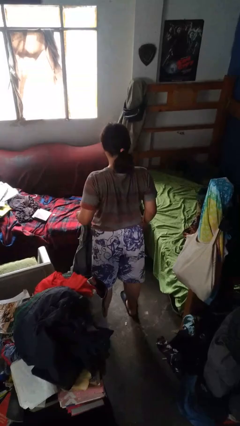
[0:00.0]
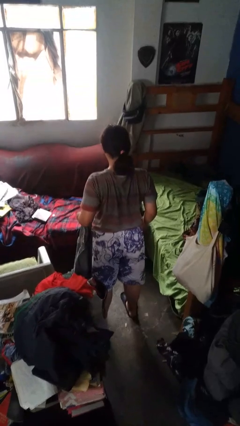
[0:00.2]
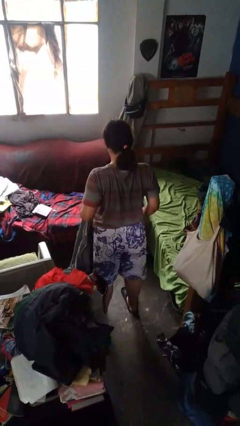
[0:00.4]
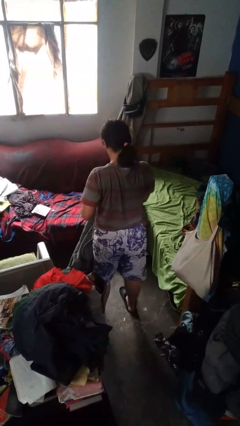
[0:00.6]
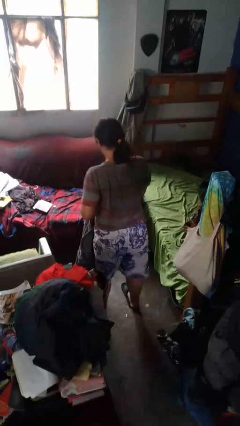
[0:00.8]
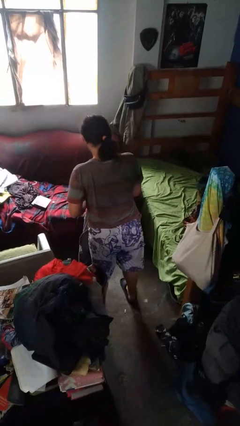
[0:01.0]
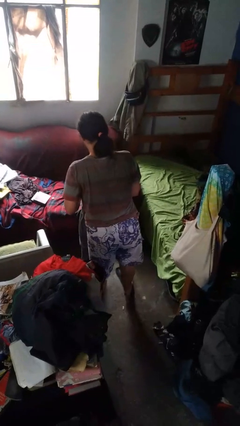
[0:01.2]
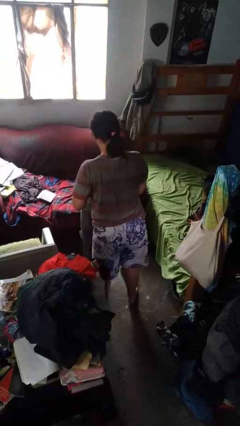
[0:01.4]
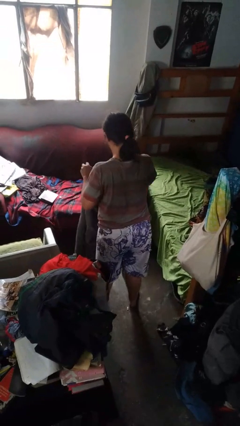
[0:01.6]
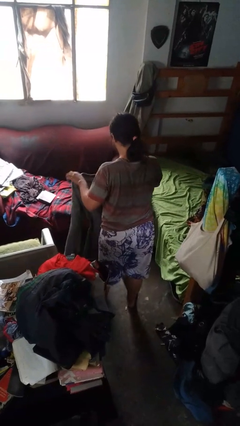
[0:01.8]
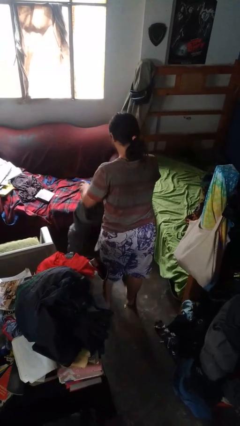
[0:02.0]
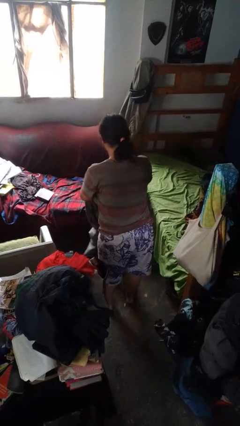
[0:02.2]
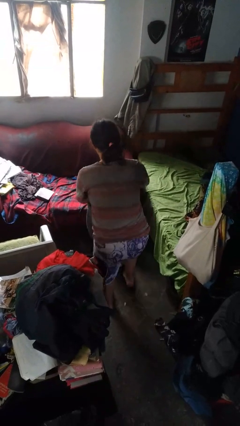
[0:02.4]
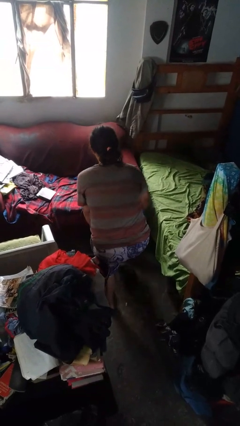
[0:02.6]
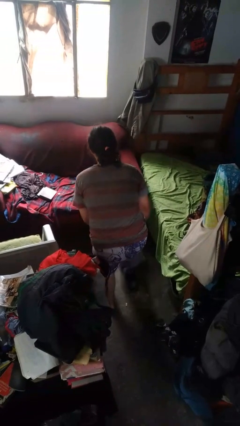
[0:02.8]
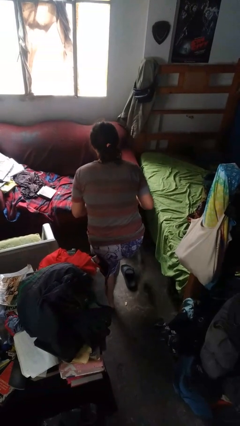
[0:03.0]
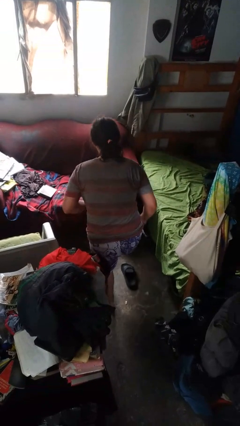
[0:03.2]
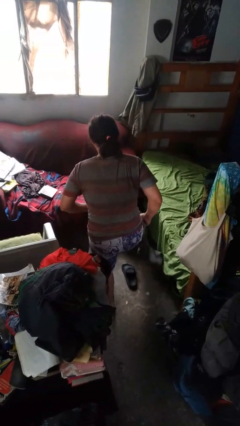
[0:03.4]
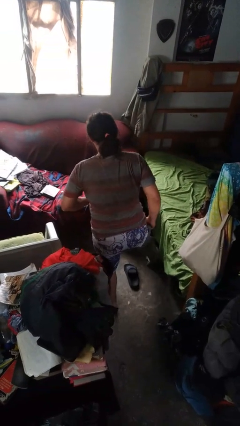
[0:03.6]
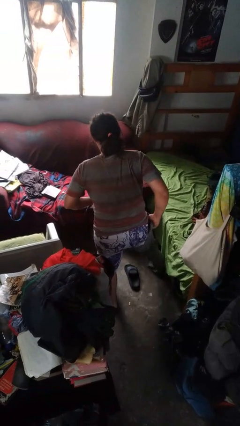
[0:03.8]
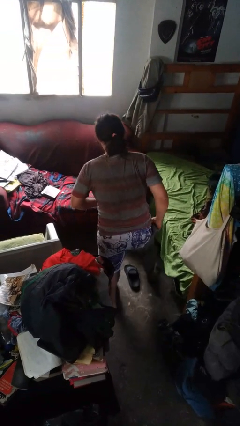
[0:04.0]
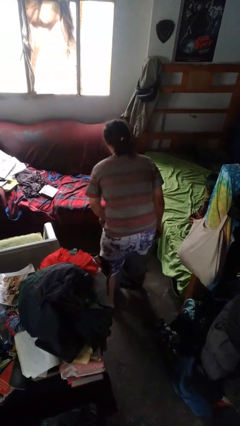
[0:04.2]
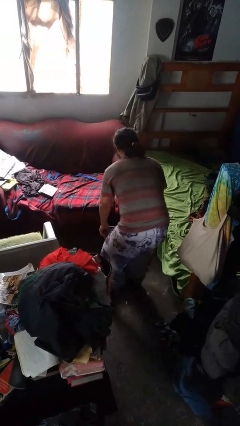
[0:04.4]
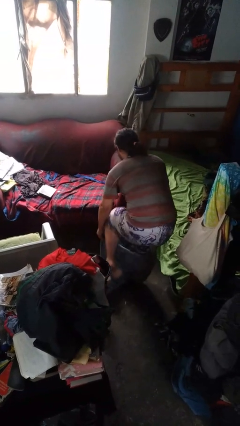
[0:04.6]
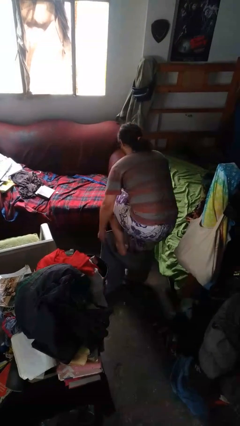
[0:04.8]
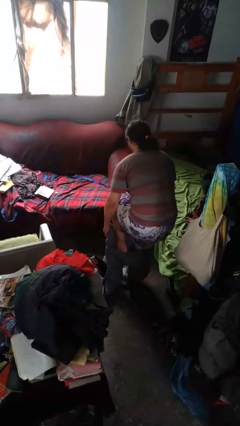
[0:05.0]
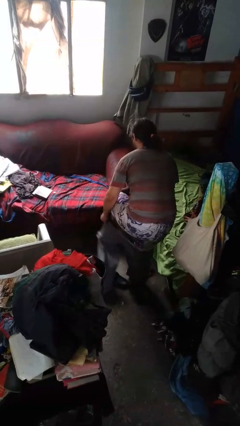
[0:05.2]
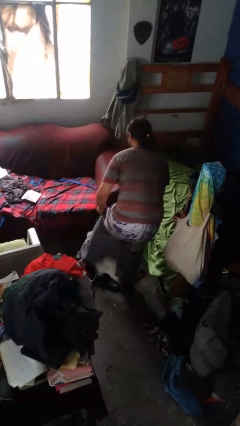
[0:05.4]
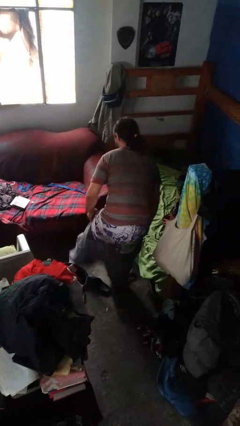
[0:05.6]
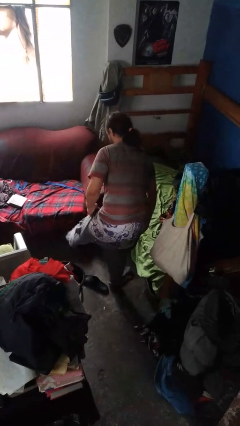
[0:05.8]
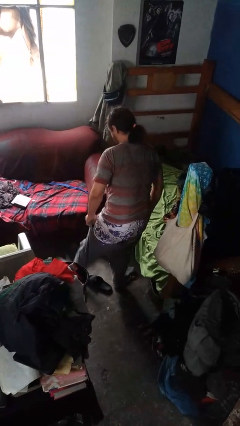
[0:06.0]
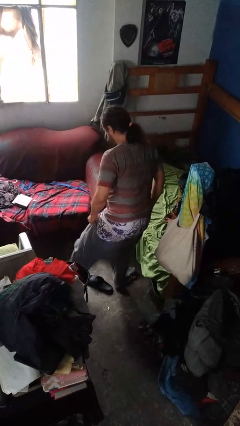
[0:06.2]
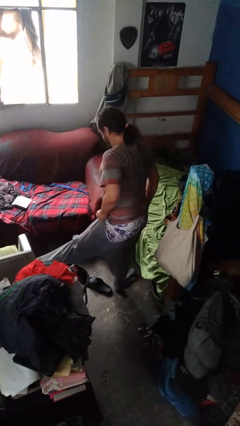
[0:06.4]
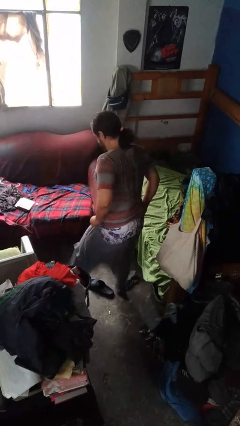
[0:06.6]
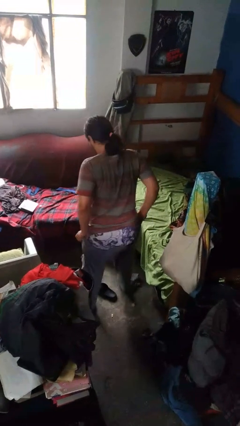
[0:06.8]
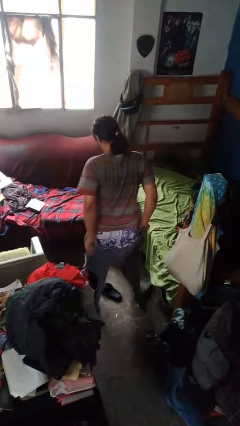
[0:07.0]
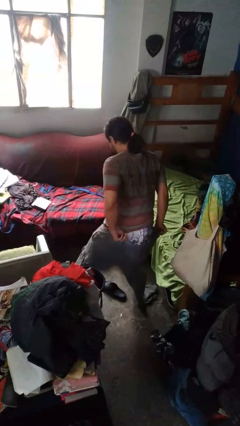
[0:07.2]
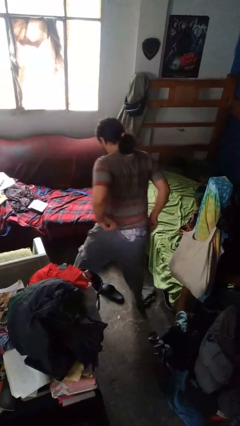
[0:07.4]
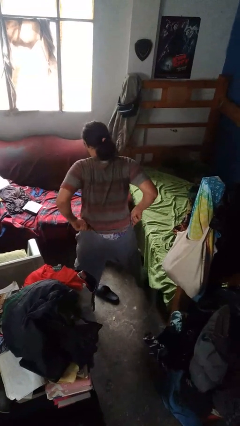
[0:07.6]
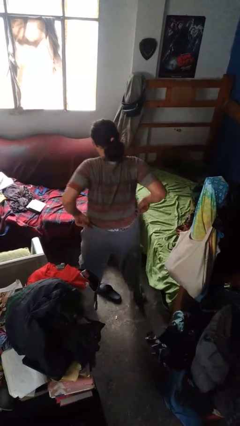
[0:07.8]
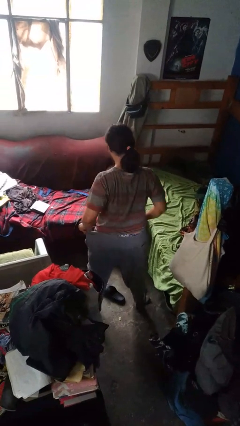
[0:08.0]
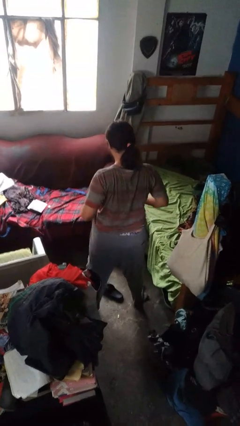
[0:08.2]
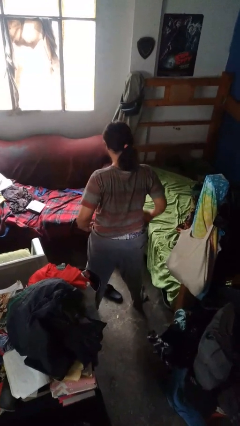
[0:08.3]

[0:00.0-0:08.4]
person puts on pants

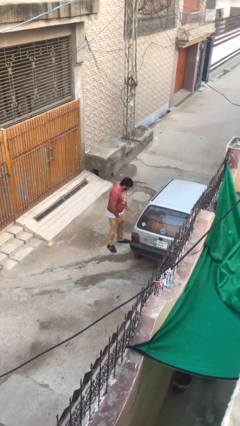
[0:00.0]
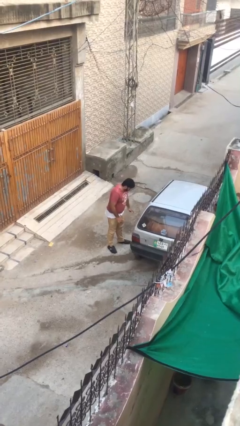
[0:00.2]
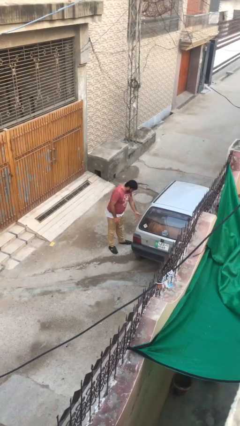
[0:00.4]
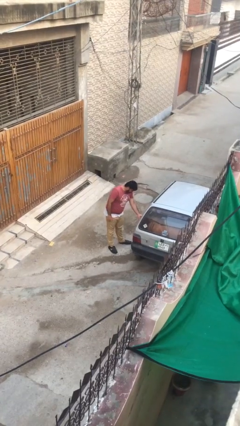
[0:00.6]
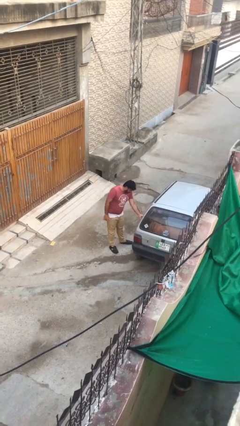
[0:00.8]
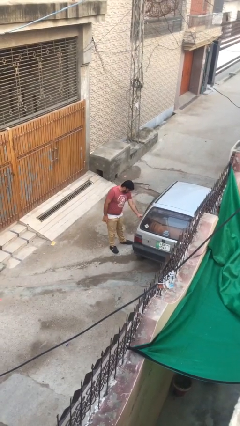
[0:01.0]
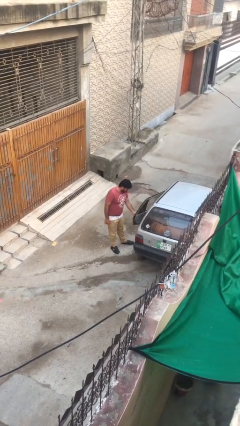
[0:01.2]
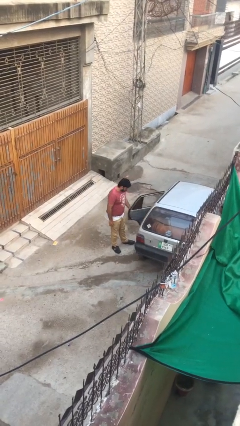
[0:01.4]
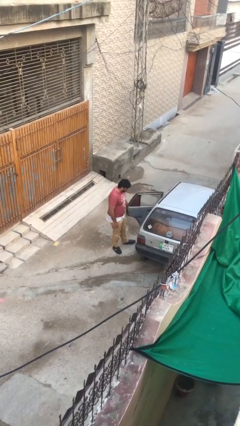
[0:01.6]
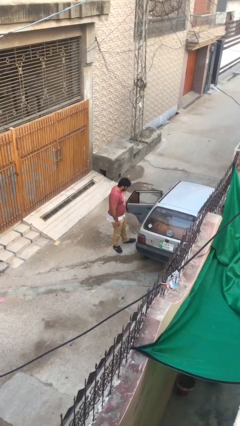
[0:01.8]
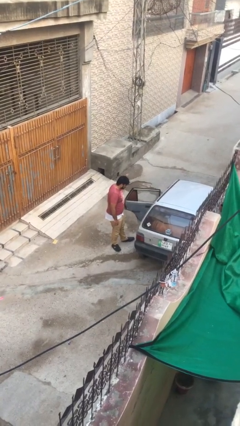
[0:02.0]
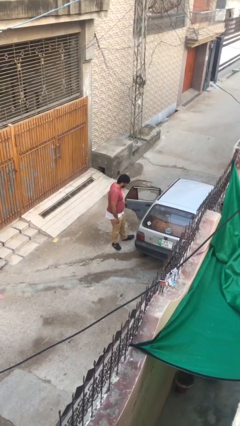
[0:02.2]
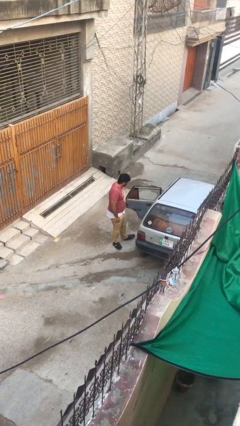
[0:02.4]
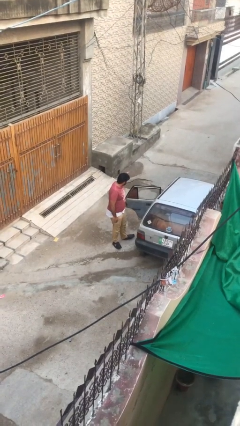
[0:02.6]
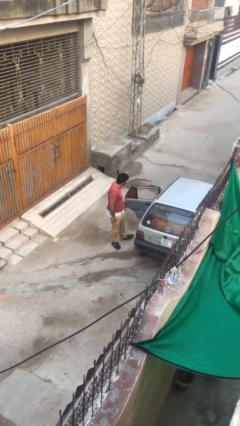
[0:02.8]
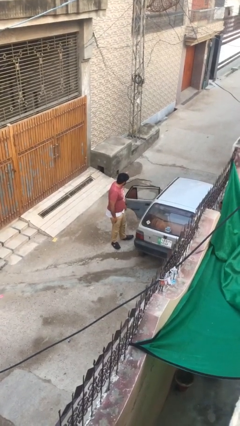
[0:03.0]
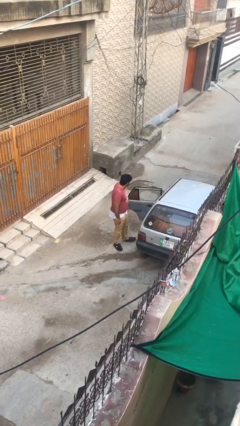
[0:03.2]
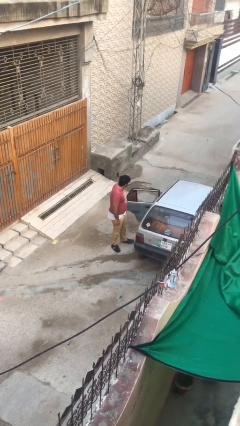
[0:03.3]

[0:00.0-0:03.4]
person opens car door

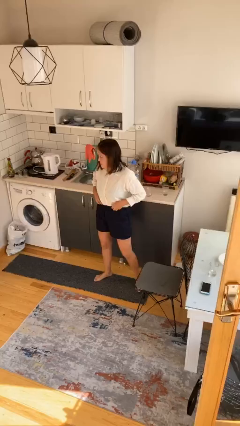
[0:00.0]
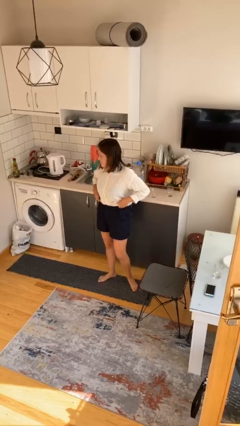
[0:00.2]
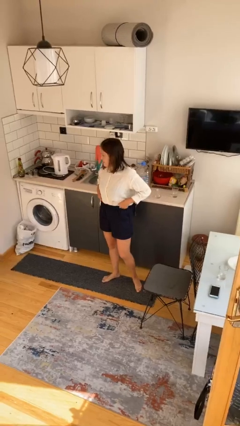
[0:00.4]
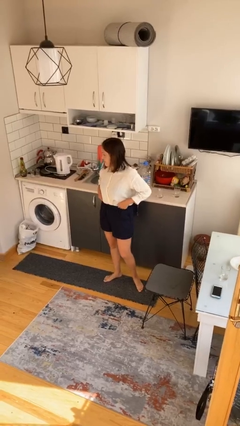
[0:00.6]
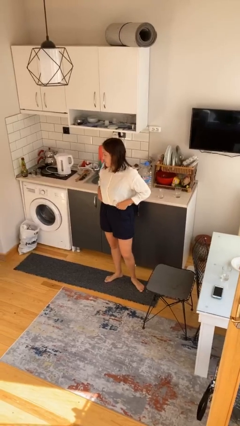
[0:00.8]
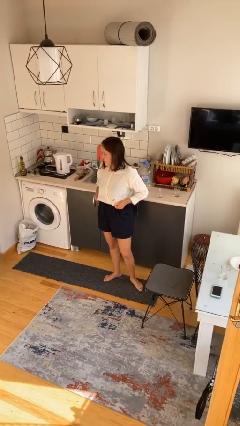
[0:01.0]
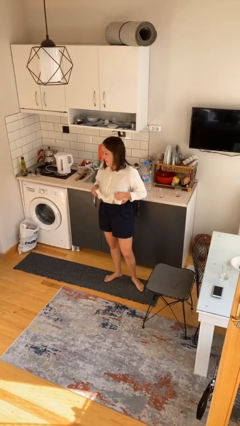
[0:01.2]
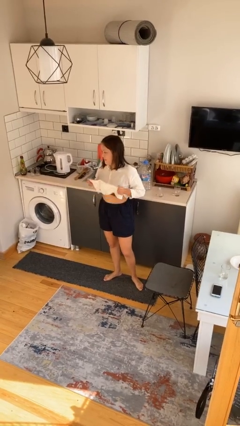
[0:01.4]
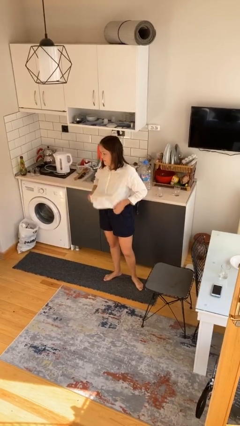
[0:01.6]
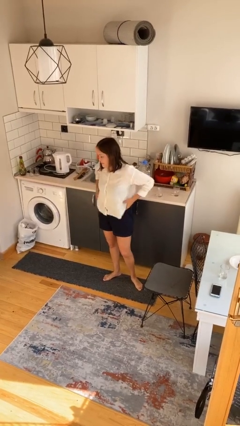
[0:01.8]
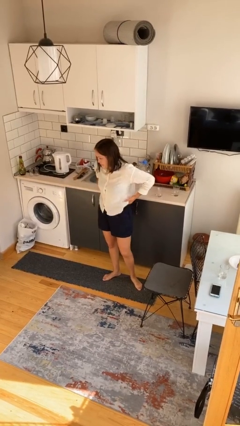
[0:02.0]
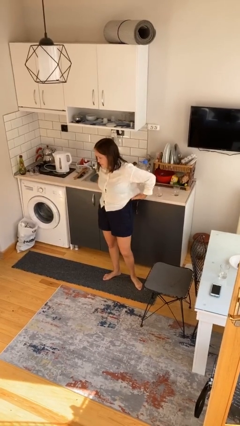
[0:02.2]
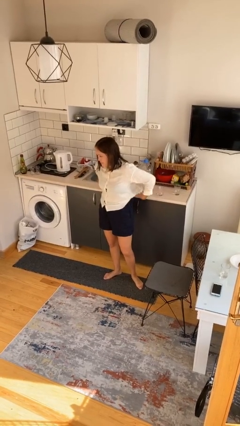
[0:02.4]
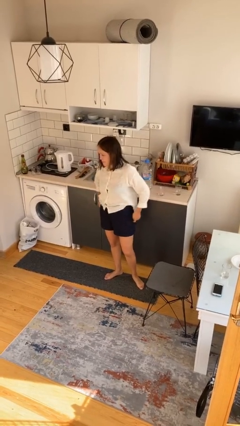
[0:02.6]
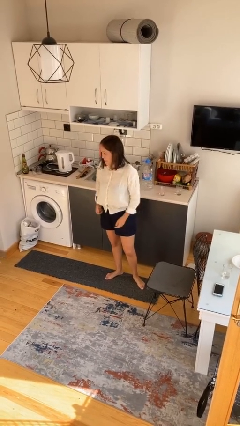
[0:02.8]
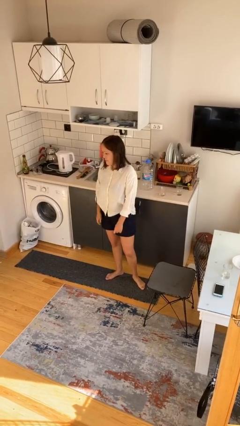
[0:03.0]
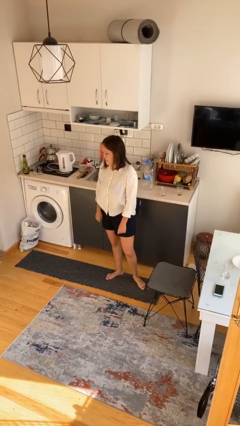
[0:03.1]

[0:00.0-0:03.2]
person untucks shirt

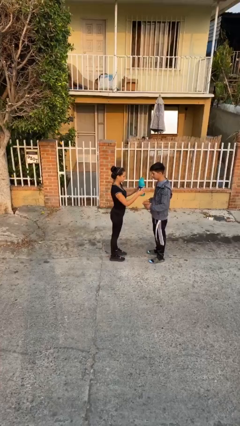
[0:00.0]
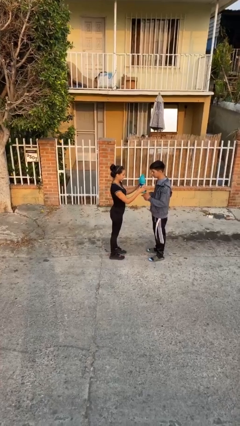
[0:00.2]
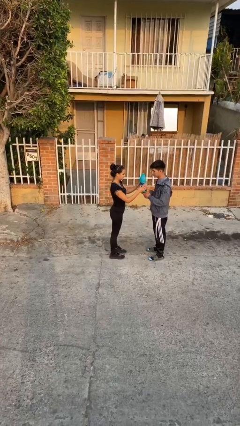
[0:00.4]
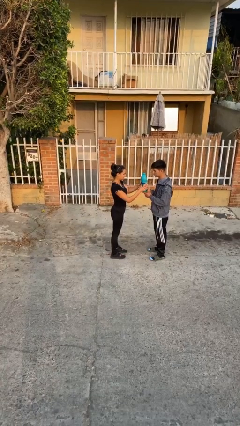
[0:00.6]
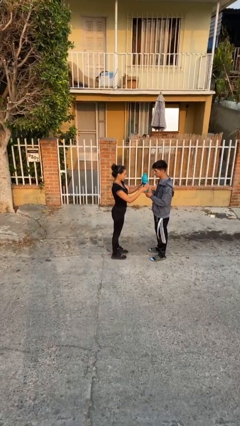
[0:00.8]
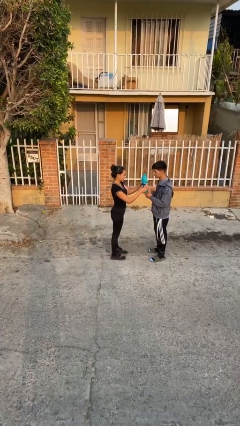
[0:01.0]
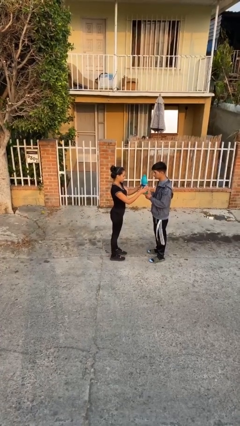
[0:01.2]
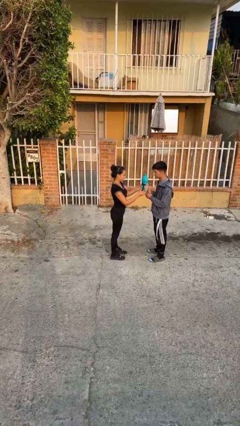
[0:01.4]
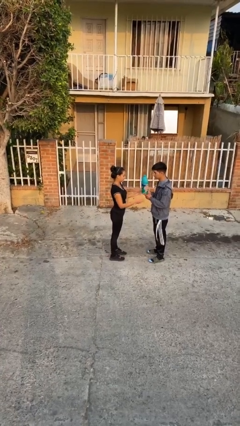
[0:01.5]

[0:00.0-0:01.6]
person transfers object to person

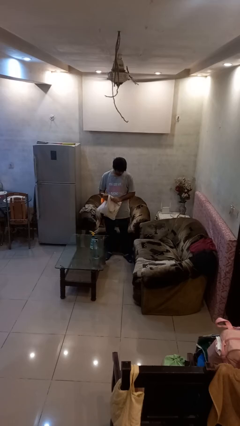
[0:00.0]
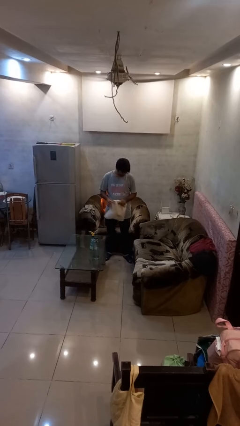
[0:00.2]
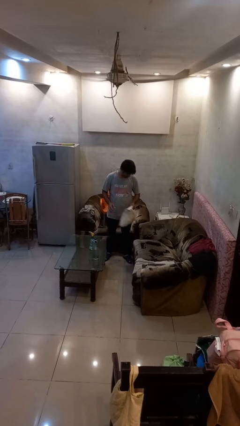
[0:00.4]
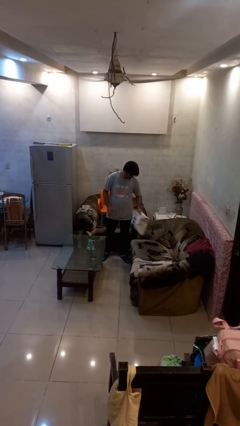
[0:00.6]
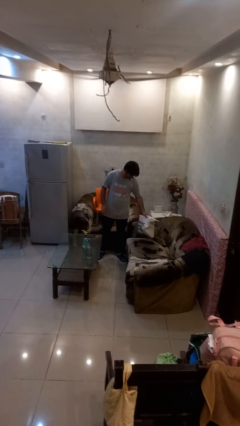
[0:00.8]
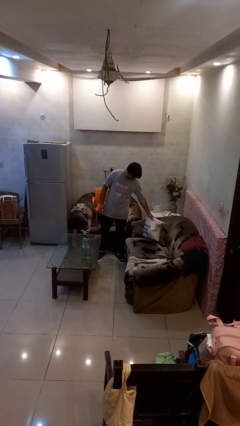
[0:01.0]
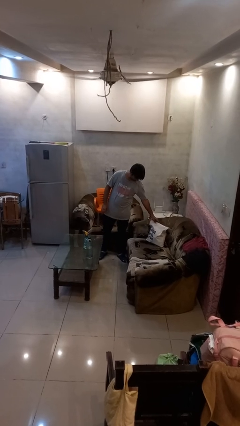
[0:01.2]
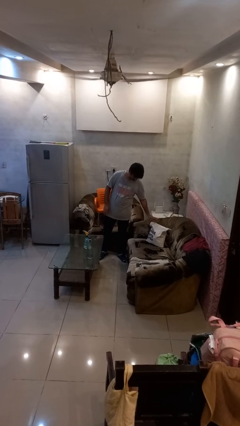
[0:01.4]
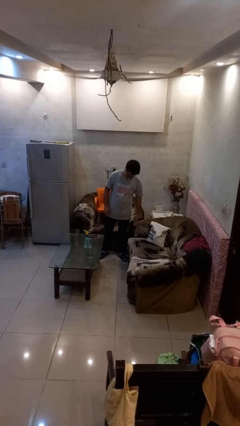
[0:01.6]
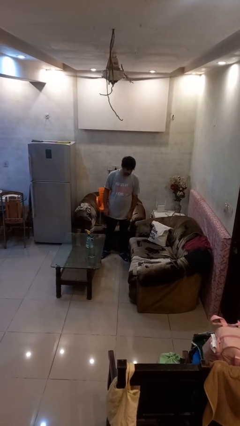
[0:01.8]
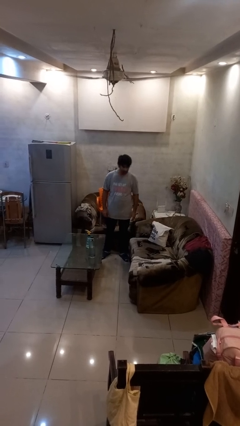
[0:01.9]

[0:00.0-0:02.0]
person puts down object on couch
